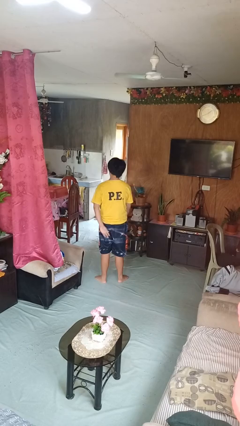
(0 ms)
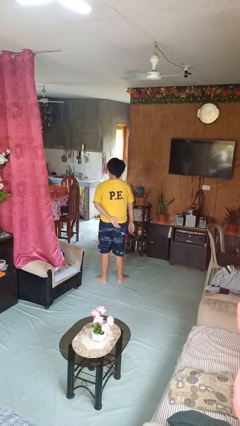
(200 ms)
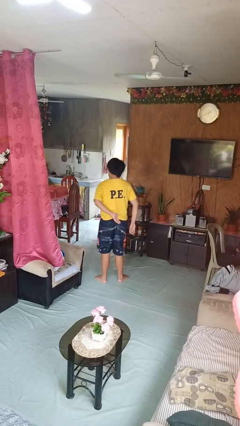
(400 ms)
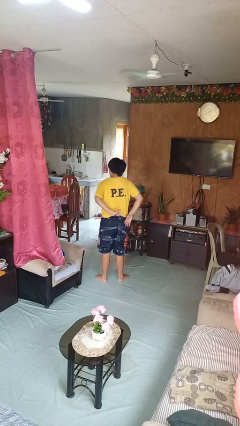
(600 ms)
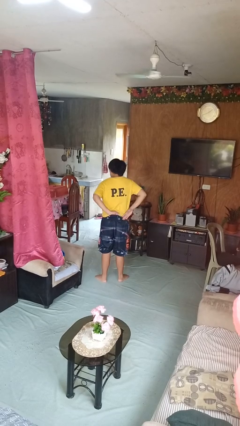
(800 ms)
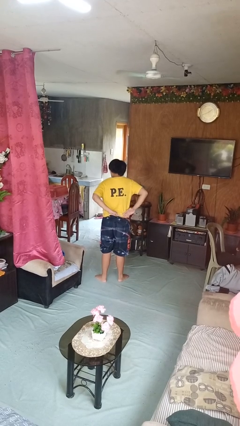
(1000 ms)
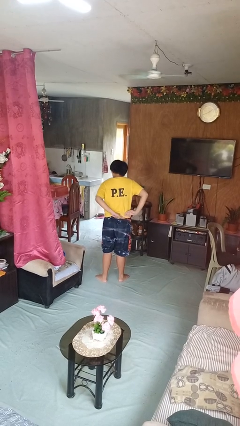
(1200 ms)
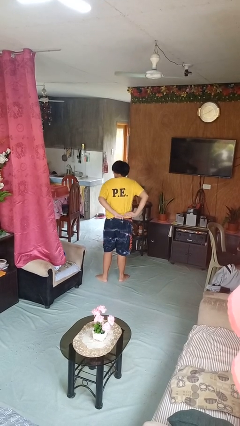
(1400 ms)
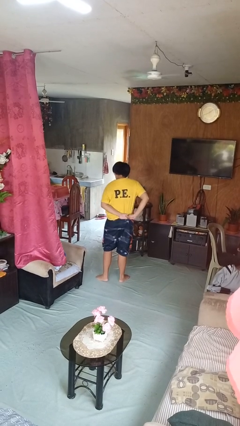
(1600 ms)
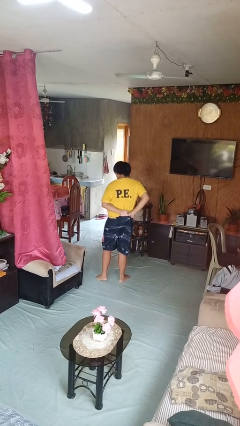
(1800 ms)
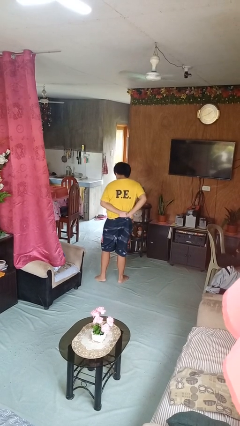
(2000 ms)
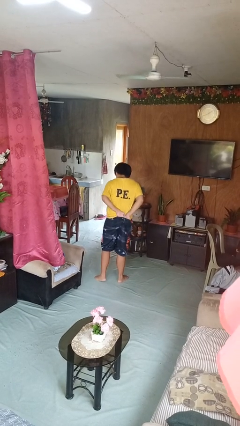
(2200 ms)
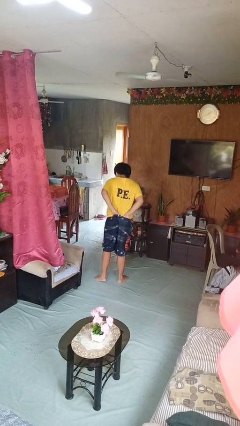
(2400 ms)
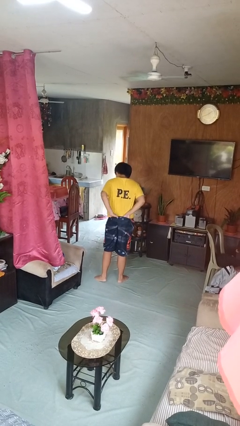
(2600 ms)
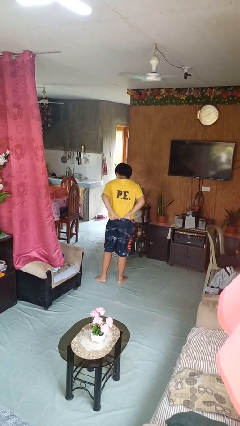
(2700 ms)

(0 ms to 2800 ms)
person tucks in shirt

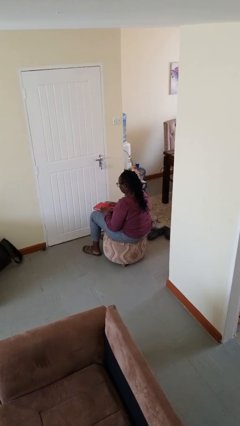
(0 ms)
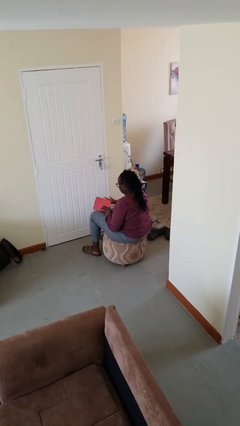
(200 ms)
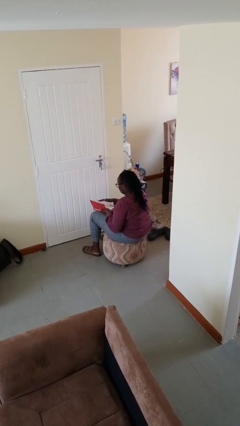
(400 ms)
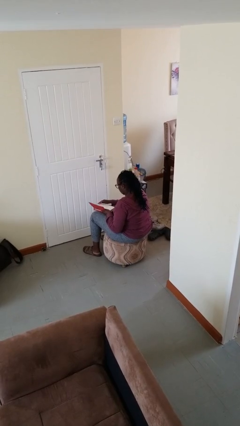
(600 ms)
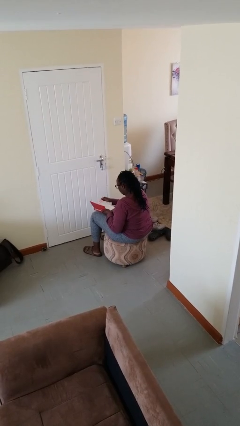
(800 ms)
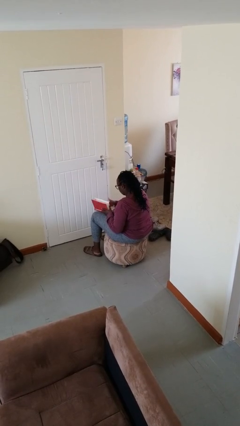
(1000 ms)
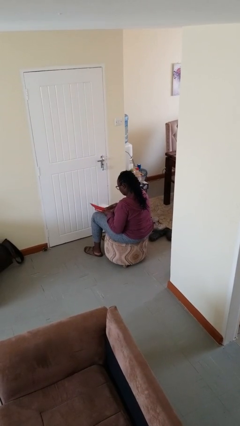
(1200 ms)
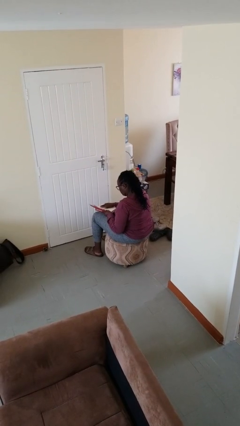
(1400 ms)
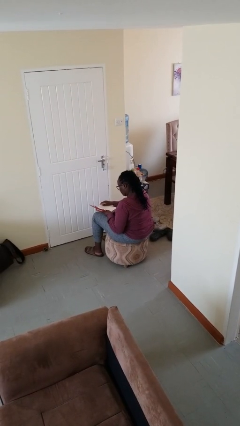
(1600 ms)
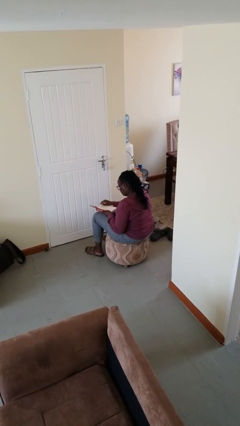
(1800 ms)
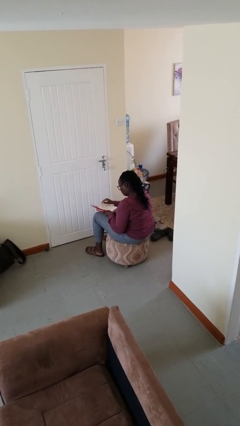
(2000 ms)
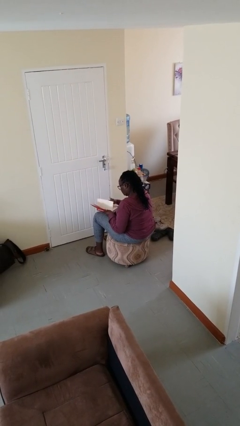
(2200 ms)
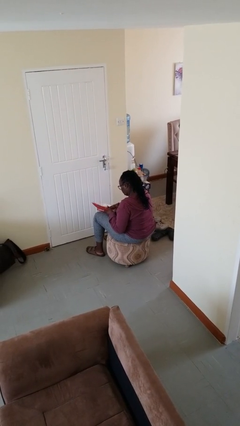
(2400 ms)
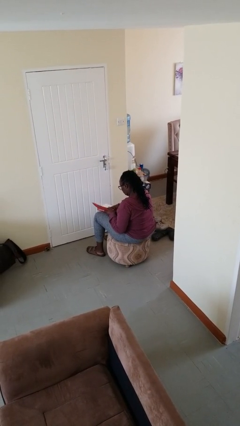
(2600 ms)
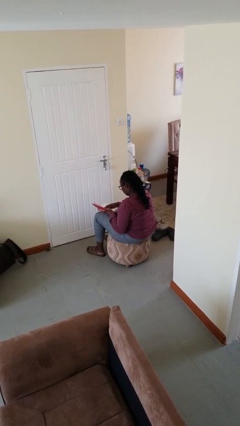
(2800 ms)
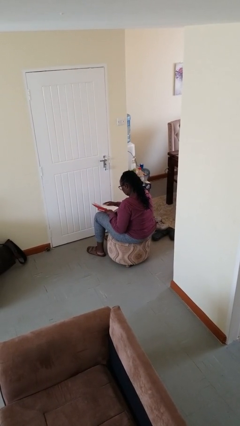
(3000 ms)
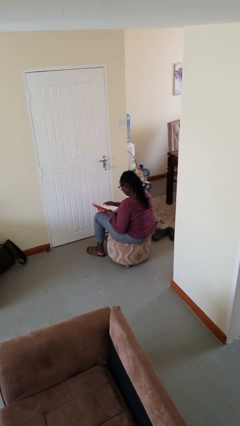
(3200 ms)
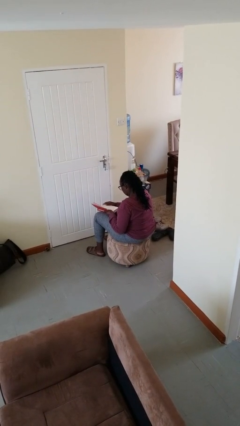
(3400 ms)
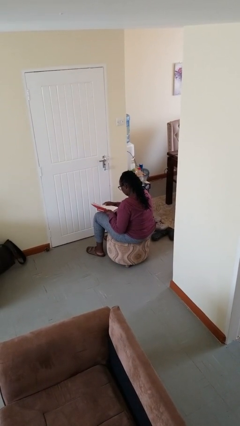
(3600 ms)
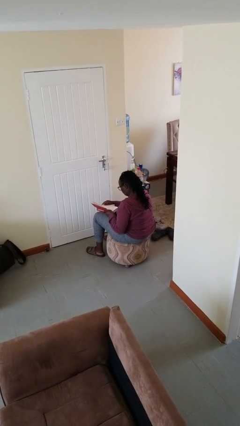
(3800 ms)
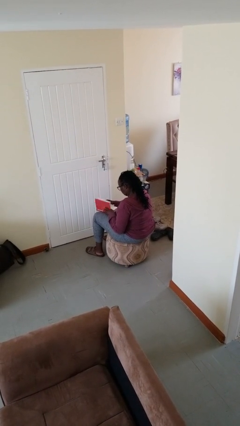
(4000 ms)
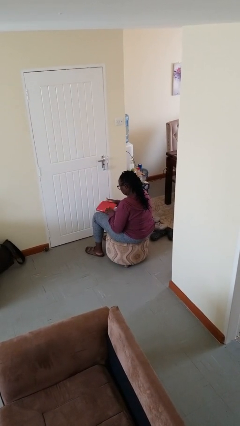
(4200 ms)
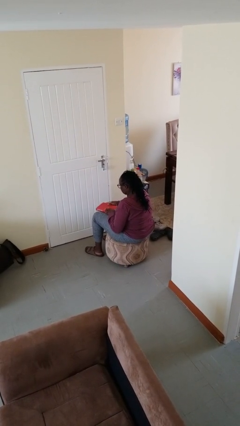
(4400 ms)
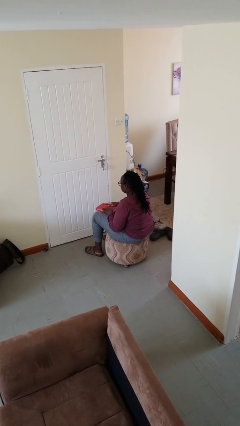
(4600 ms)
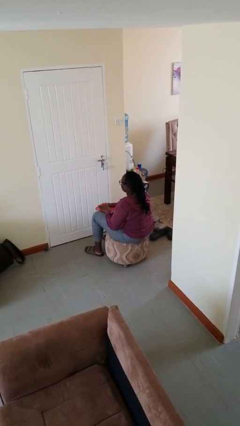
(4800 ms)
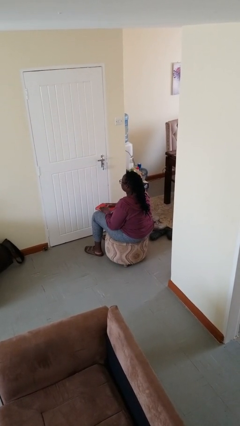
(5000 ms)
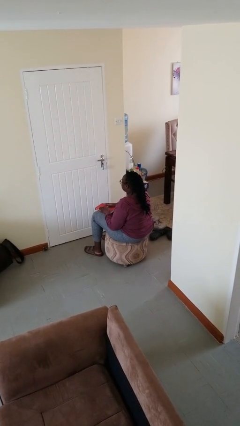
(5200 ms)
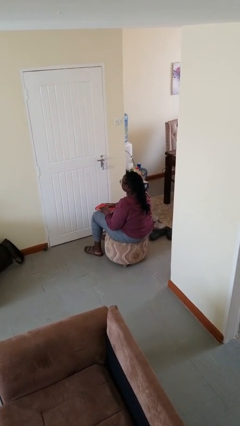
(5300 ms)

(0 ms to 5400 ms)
person reads book

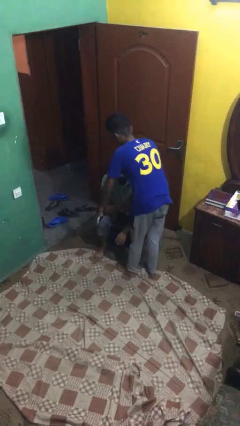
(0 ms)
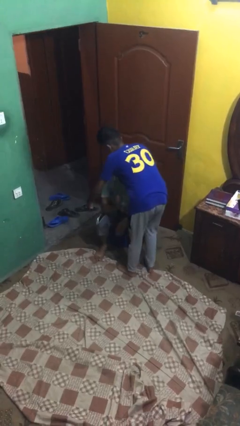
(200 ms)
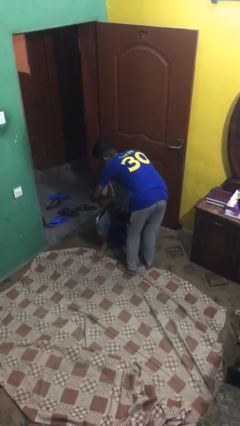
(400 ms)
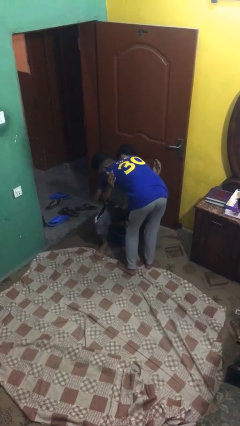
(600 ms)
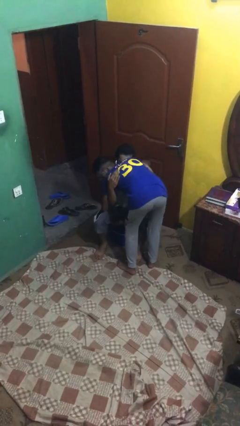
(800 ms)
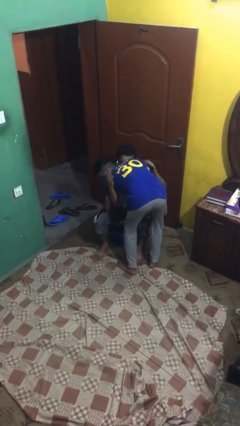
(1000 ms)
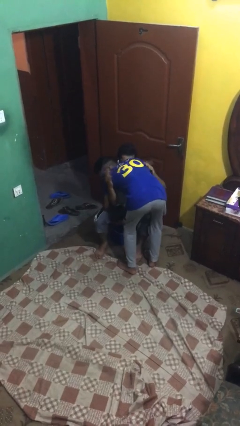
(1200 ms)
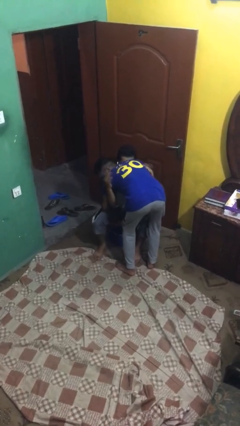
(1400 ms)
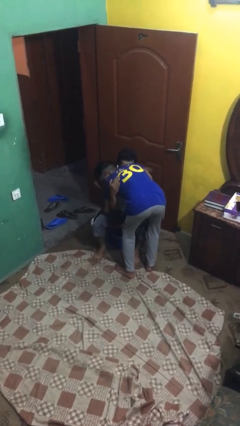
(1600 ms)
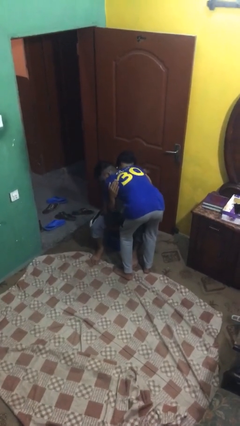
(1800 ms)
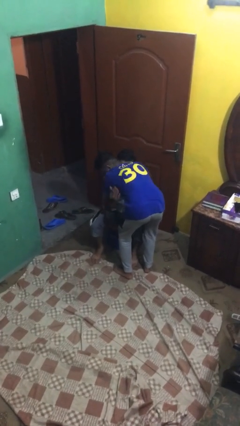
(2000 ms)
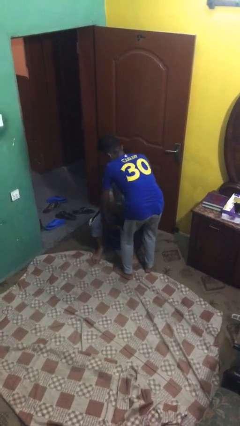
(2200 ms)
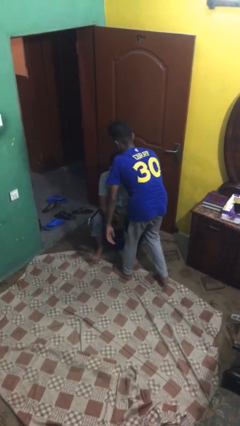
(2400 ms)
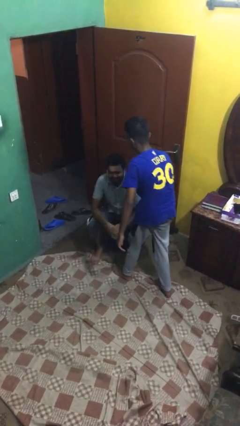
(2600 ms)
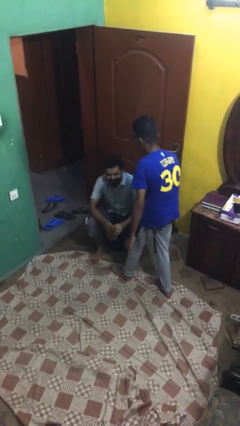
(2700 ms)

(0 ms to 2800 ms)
person embraces person

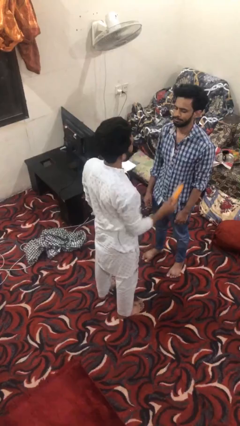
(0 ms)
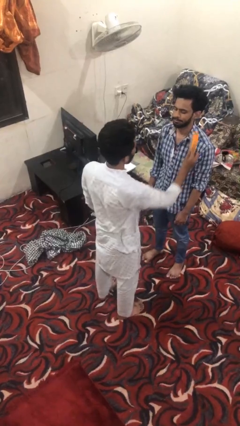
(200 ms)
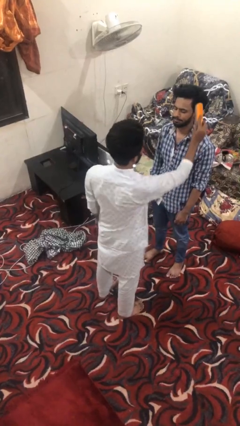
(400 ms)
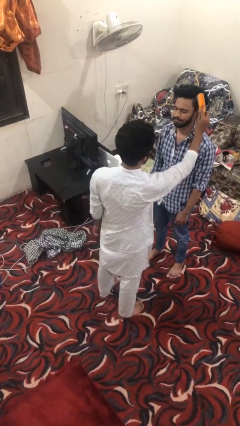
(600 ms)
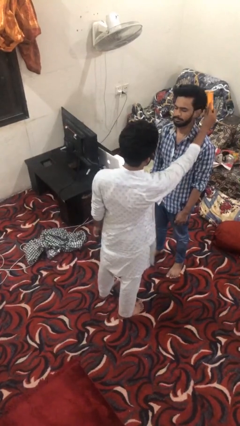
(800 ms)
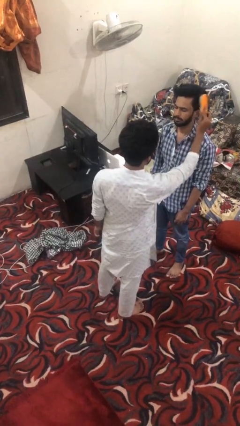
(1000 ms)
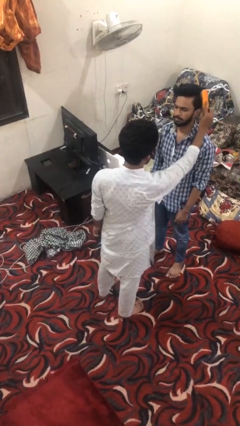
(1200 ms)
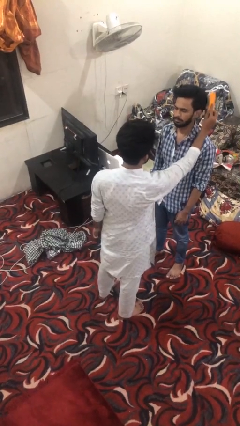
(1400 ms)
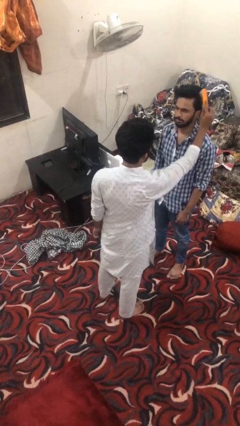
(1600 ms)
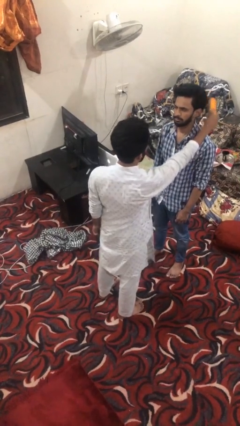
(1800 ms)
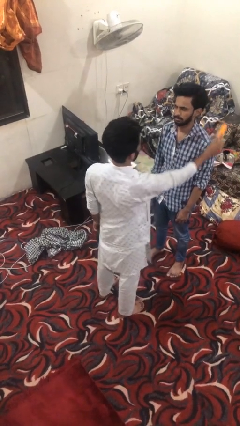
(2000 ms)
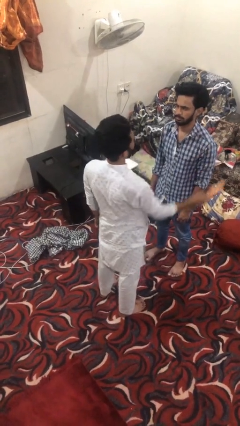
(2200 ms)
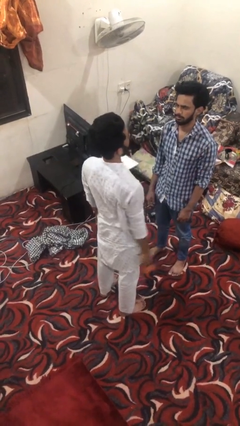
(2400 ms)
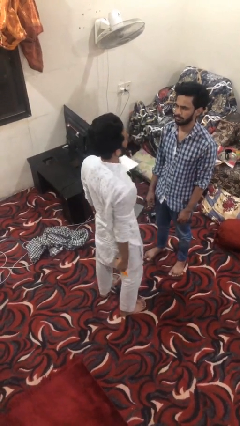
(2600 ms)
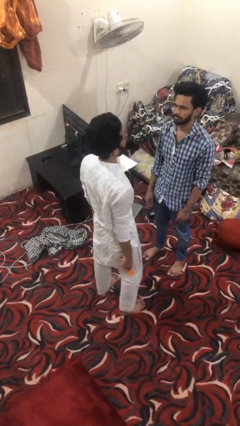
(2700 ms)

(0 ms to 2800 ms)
person brushes hair of person

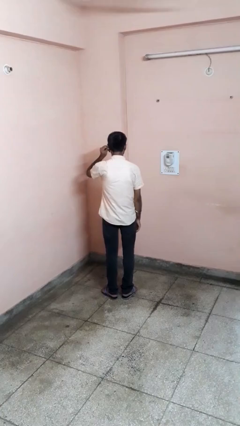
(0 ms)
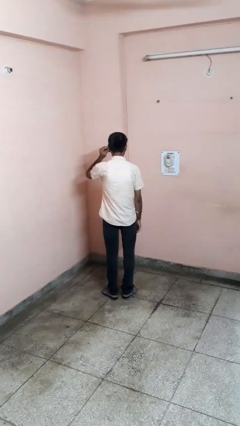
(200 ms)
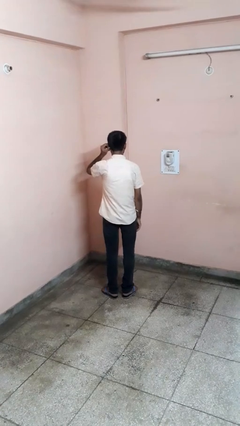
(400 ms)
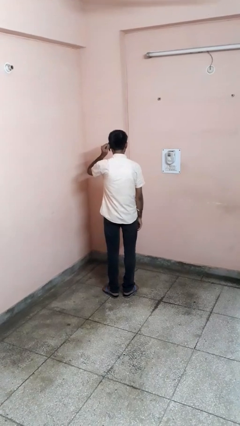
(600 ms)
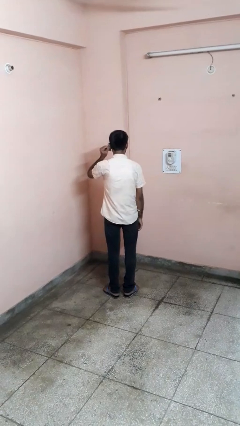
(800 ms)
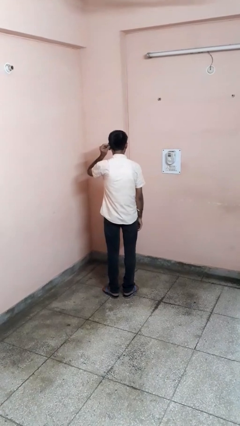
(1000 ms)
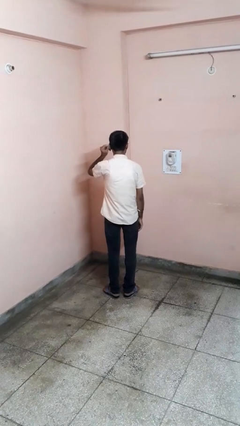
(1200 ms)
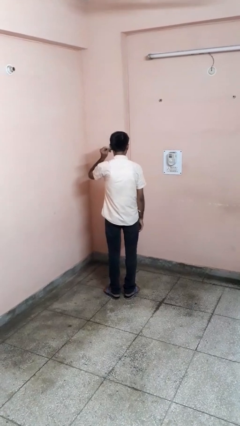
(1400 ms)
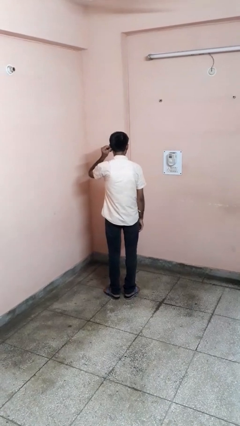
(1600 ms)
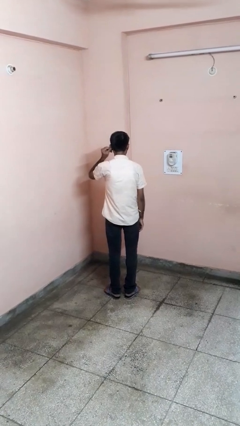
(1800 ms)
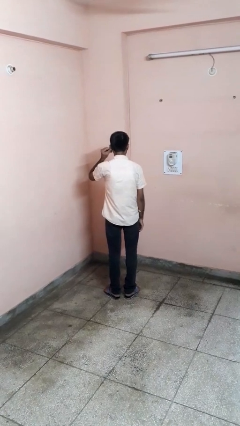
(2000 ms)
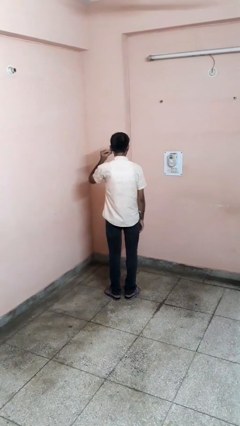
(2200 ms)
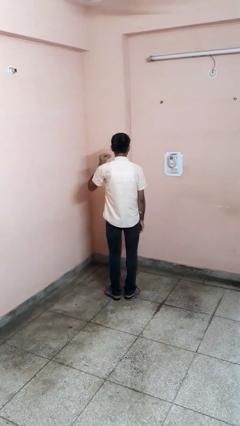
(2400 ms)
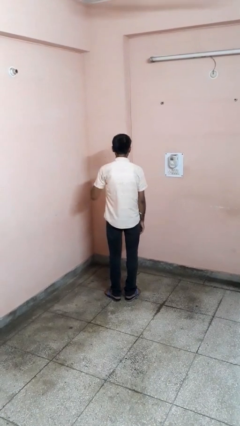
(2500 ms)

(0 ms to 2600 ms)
person touches earlobe

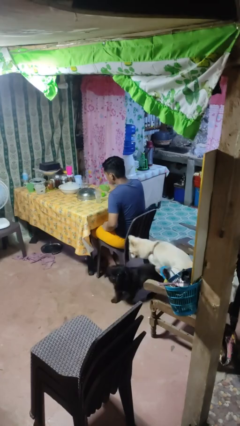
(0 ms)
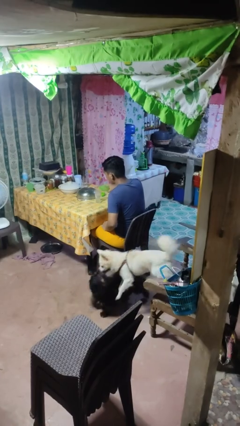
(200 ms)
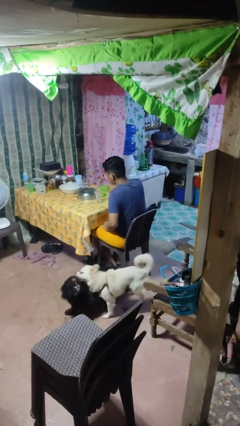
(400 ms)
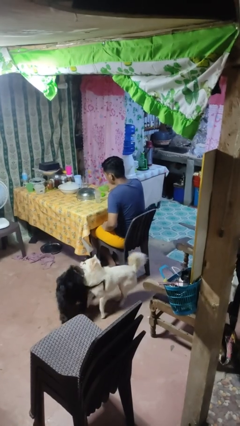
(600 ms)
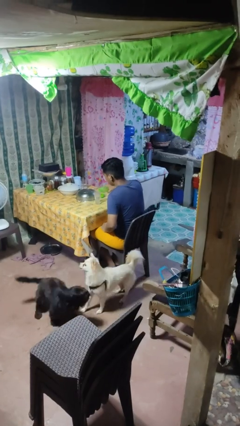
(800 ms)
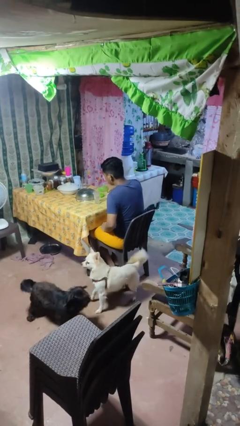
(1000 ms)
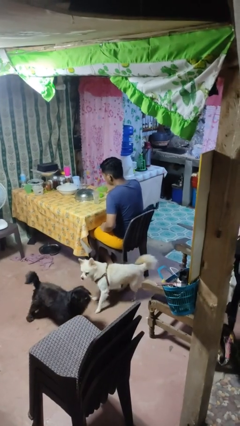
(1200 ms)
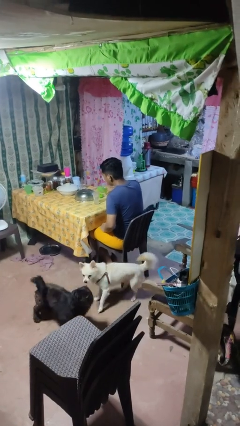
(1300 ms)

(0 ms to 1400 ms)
person pours liquid into cup
